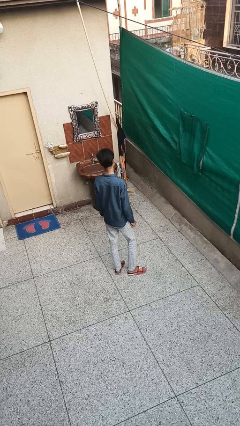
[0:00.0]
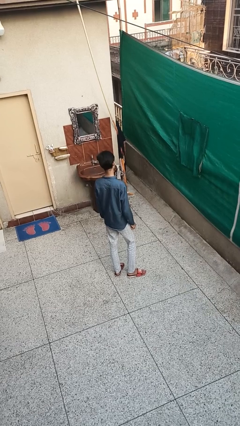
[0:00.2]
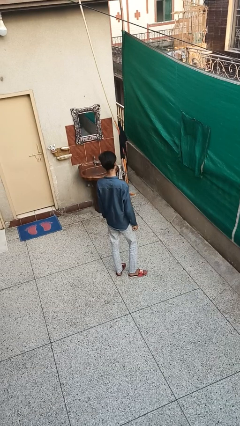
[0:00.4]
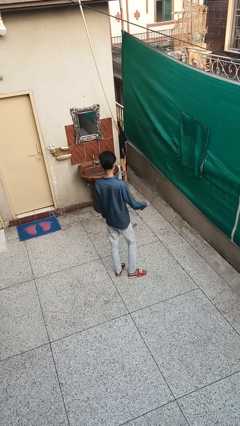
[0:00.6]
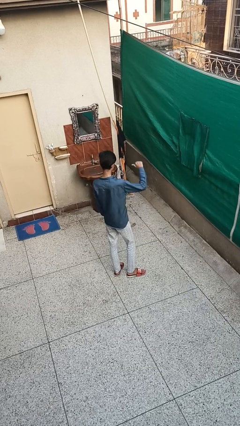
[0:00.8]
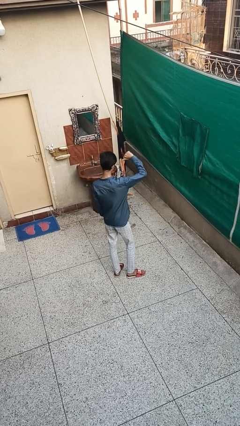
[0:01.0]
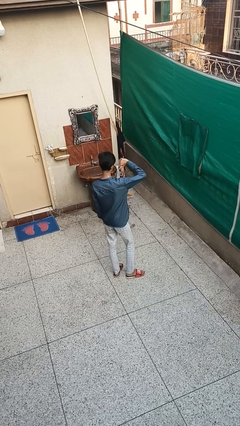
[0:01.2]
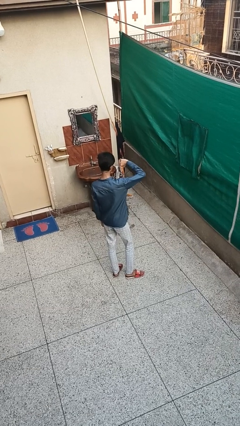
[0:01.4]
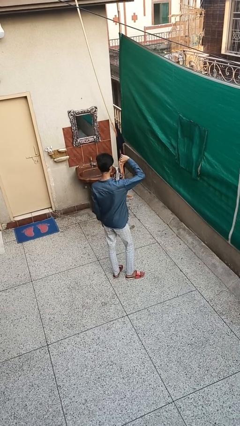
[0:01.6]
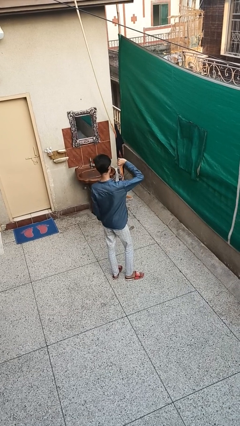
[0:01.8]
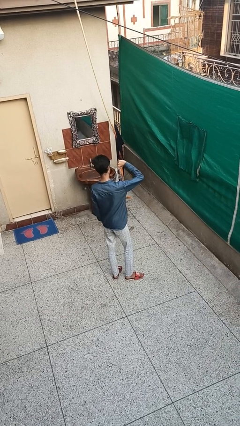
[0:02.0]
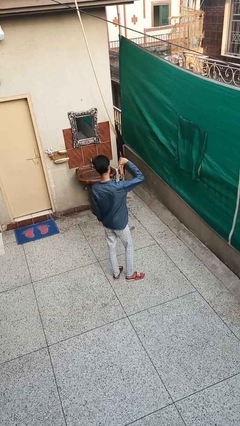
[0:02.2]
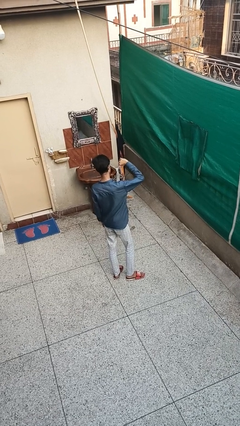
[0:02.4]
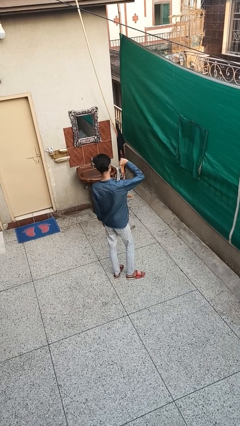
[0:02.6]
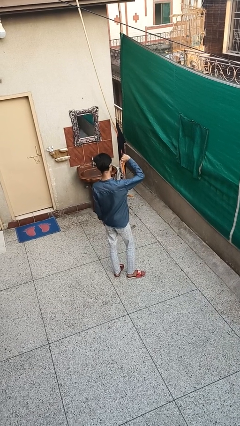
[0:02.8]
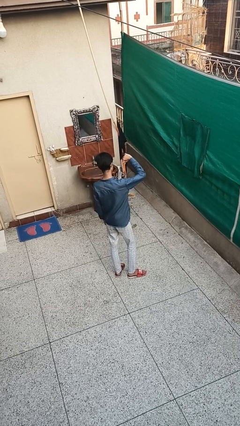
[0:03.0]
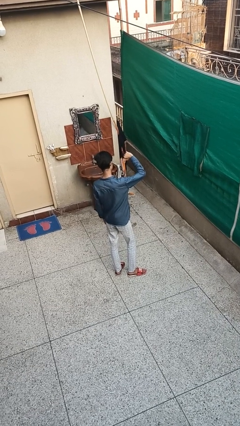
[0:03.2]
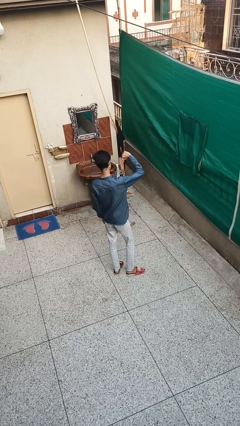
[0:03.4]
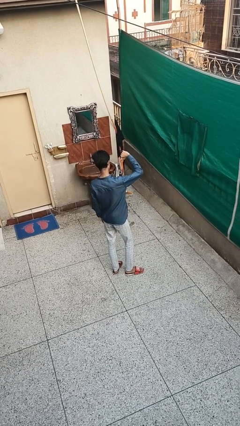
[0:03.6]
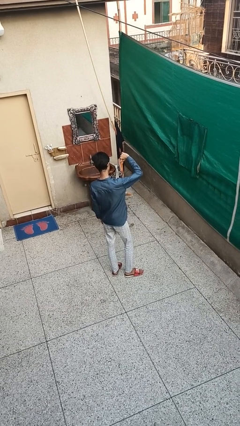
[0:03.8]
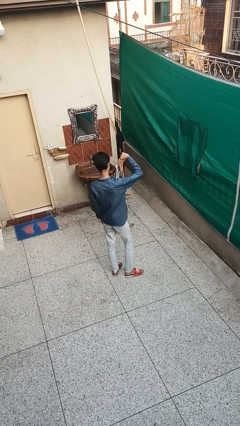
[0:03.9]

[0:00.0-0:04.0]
person gestures thumbs down

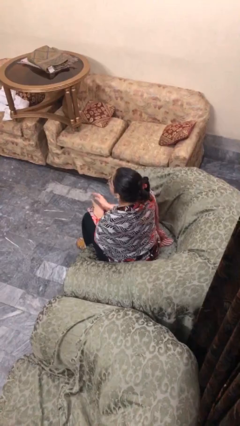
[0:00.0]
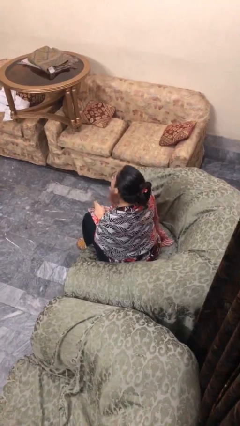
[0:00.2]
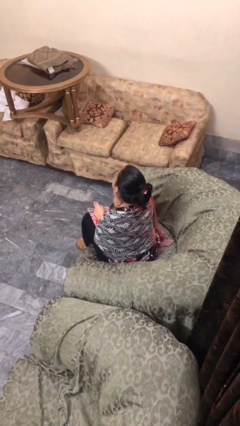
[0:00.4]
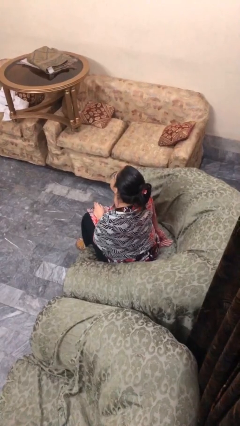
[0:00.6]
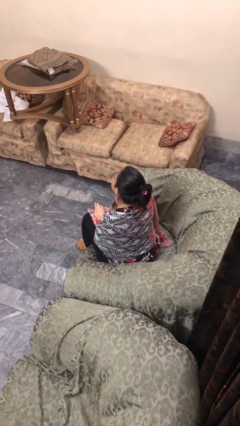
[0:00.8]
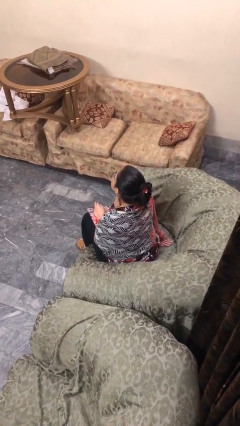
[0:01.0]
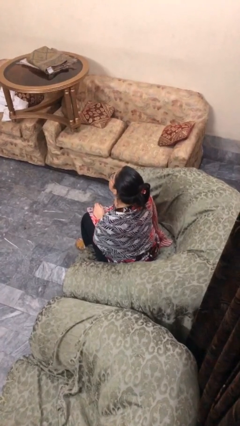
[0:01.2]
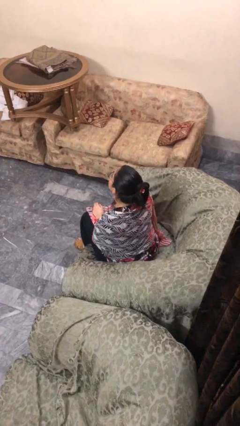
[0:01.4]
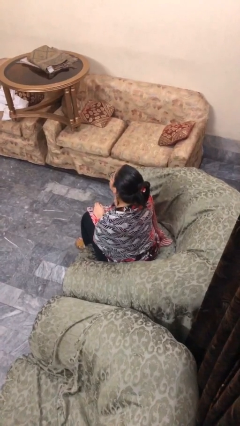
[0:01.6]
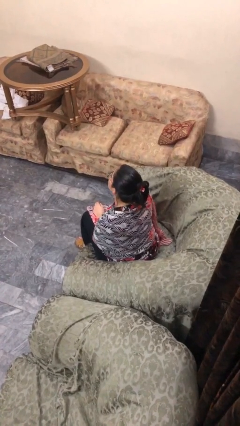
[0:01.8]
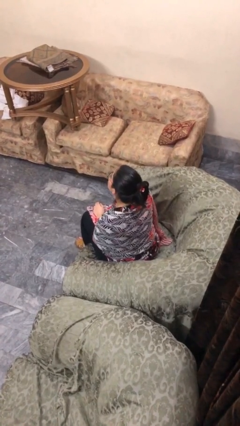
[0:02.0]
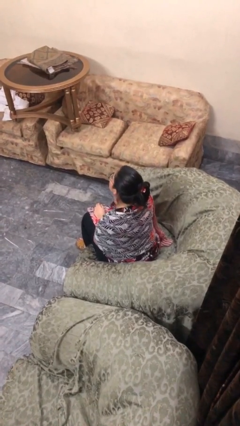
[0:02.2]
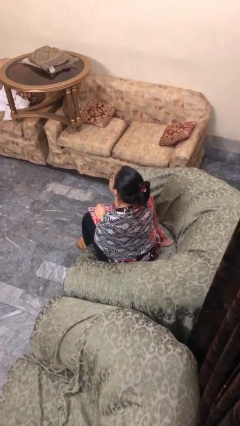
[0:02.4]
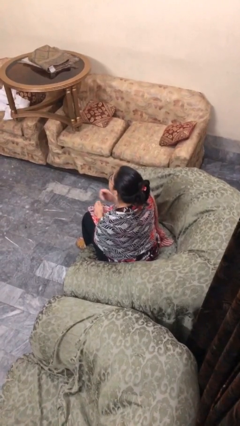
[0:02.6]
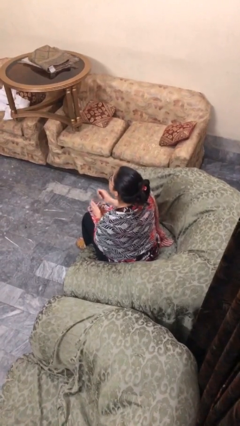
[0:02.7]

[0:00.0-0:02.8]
person rubs neck

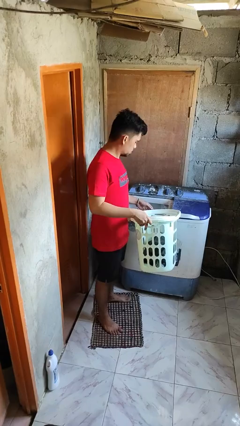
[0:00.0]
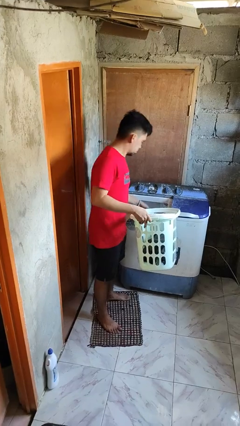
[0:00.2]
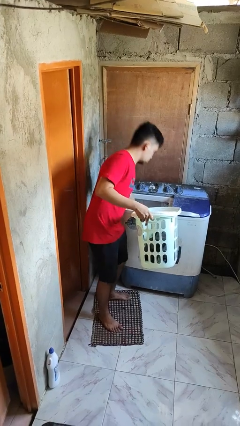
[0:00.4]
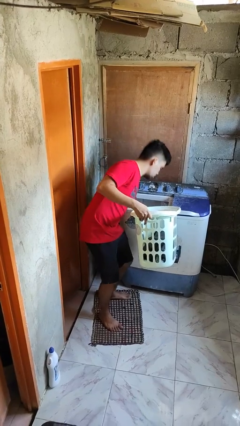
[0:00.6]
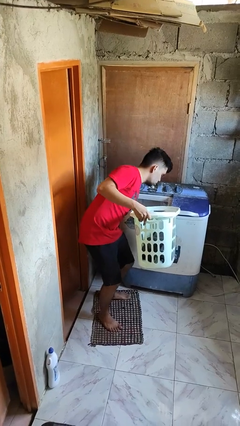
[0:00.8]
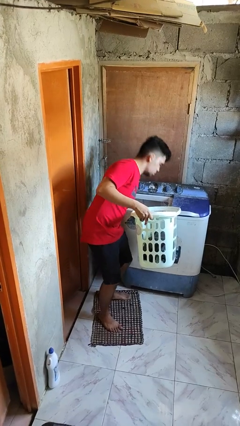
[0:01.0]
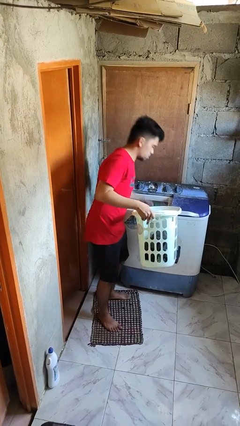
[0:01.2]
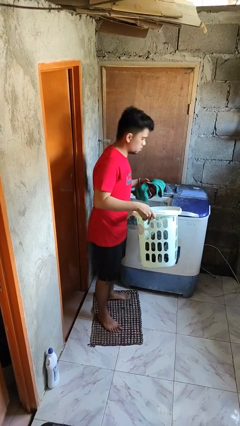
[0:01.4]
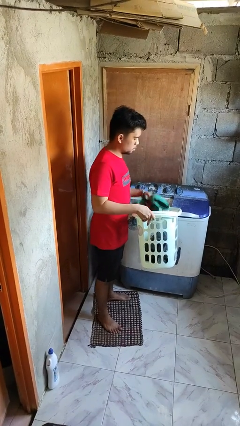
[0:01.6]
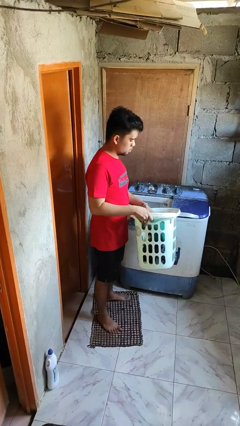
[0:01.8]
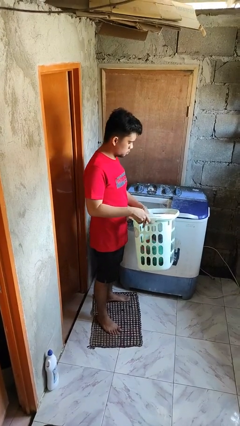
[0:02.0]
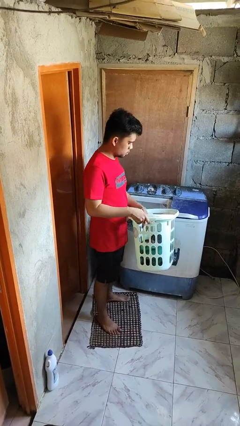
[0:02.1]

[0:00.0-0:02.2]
person loads clotheswasher

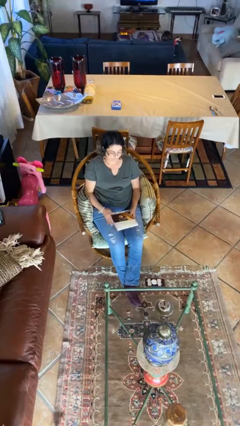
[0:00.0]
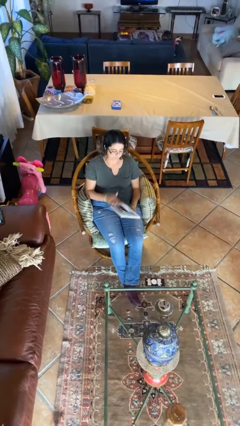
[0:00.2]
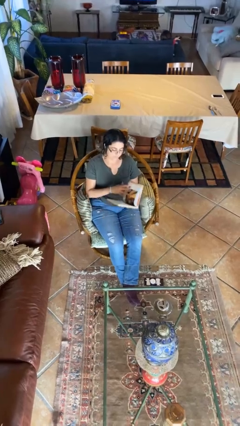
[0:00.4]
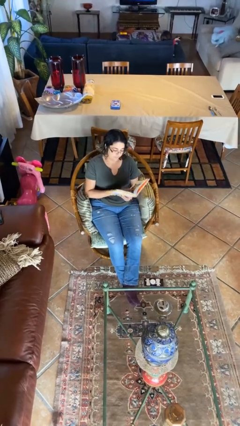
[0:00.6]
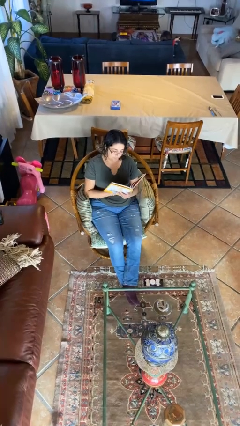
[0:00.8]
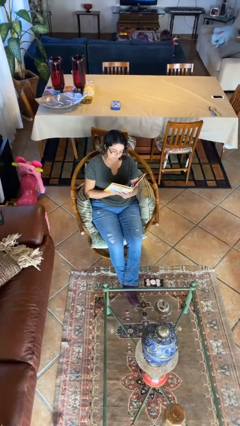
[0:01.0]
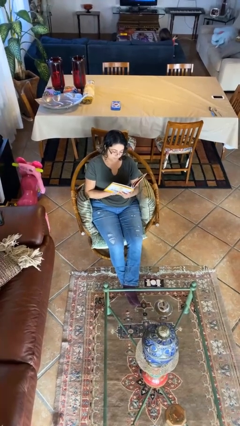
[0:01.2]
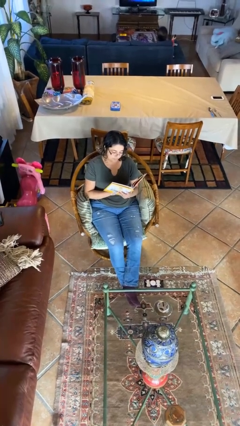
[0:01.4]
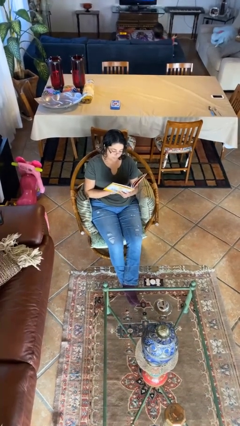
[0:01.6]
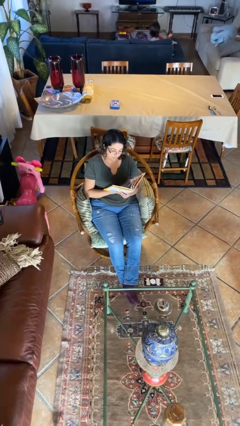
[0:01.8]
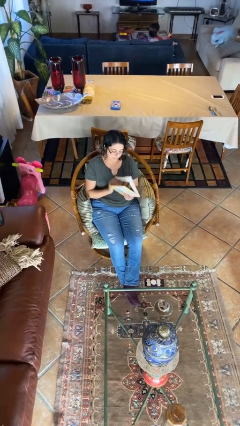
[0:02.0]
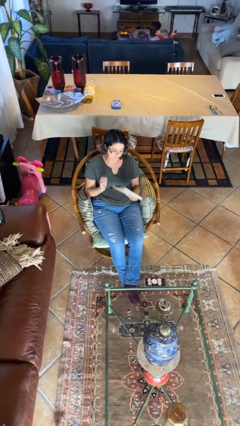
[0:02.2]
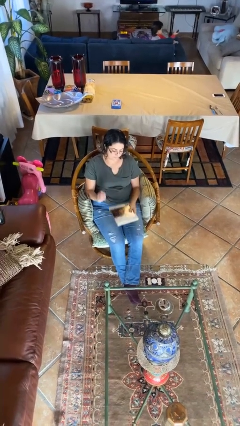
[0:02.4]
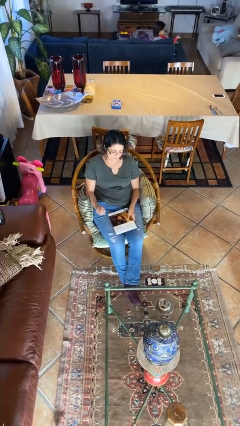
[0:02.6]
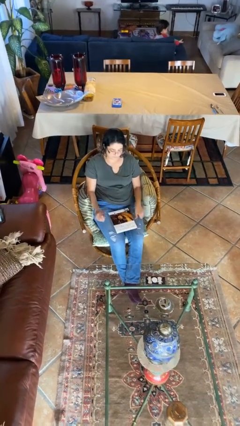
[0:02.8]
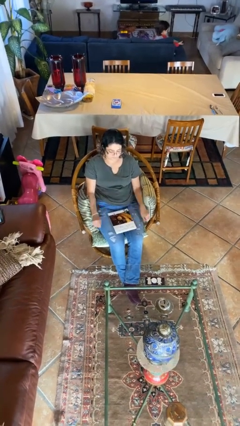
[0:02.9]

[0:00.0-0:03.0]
person reads document

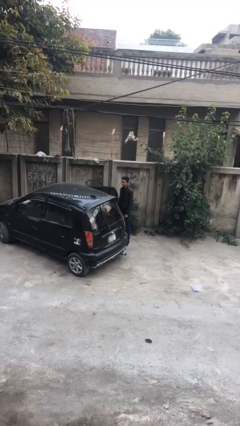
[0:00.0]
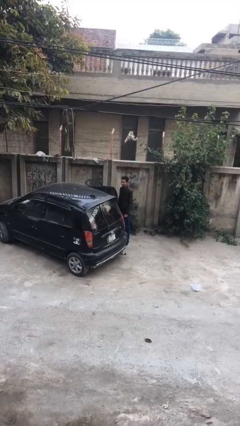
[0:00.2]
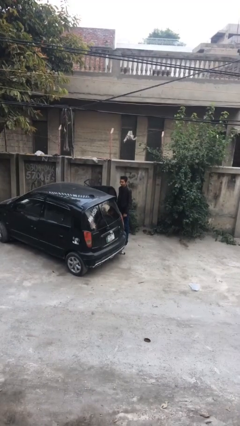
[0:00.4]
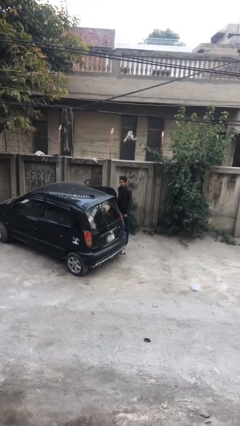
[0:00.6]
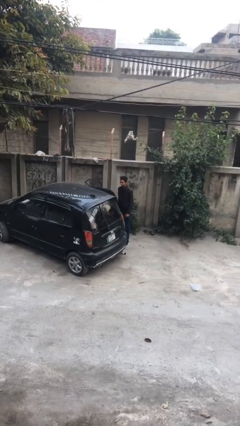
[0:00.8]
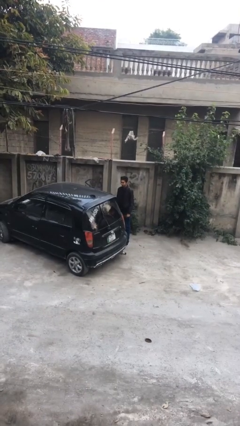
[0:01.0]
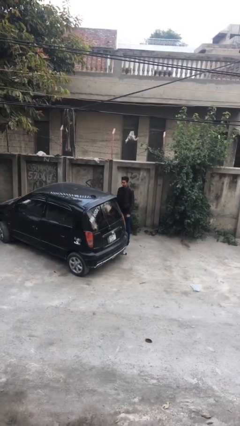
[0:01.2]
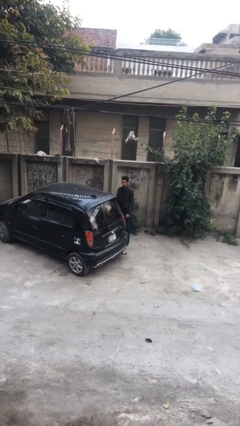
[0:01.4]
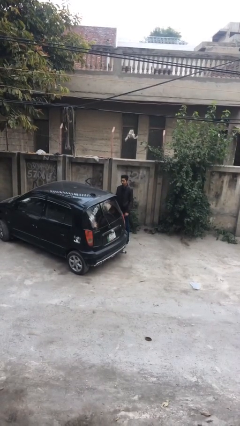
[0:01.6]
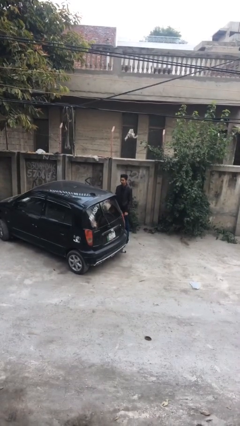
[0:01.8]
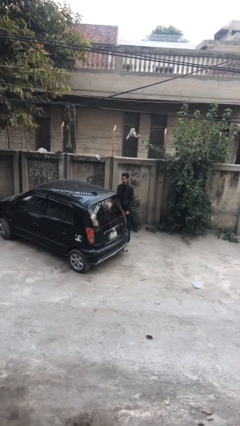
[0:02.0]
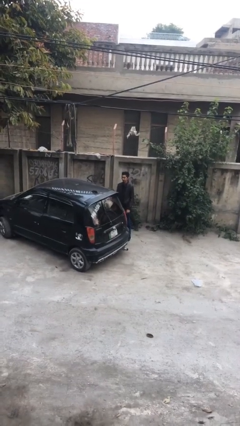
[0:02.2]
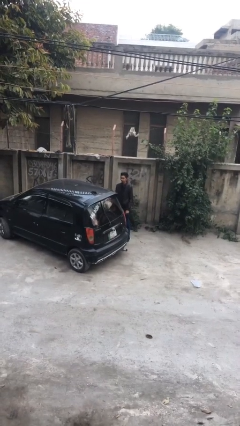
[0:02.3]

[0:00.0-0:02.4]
person closes car door

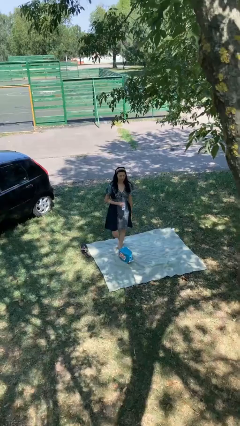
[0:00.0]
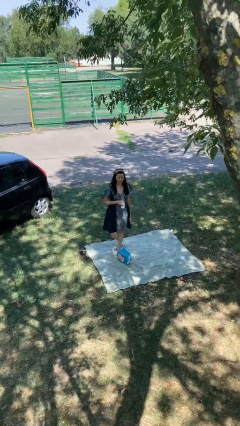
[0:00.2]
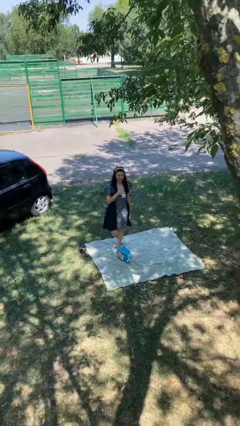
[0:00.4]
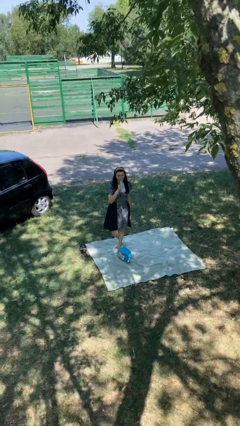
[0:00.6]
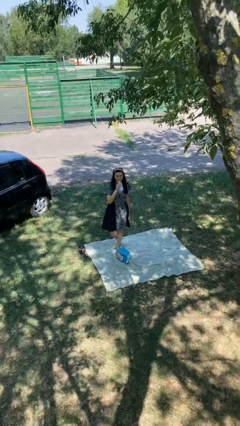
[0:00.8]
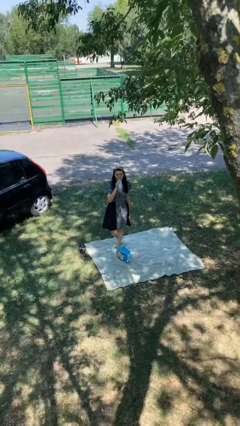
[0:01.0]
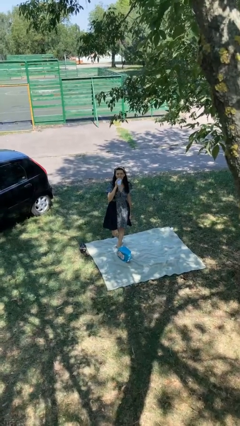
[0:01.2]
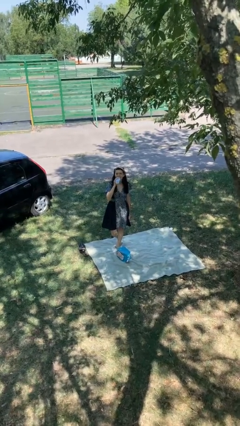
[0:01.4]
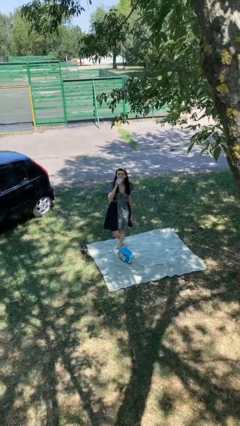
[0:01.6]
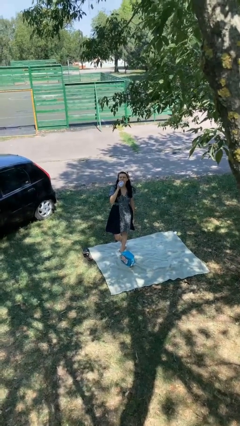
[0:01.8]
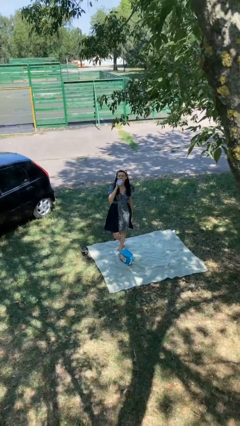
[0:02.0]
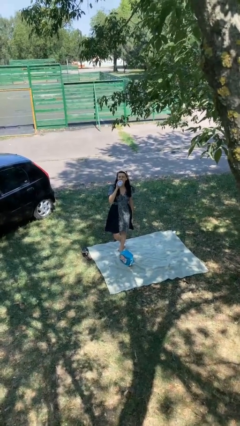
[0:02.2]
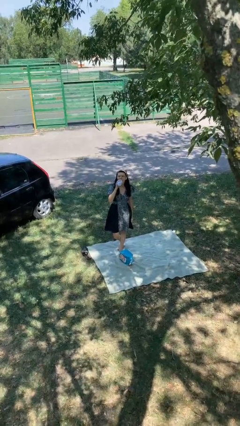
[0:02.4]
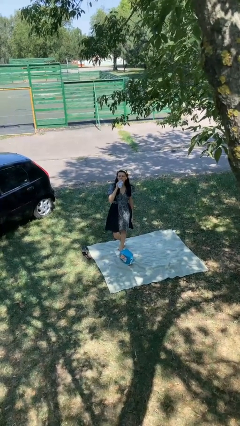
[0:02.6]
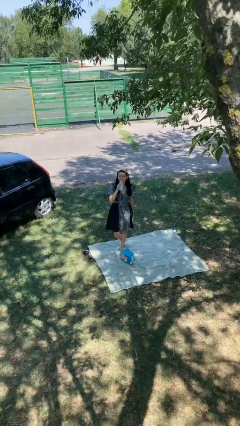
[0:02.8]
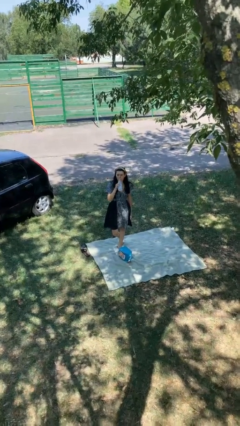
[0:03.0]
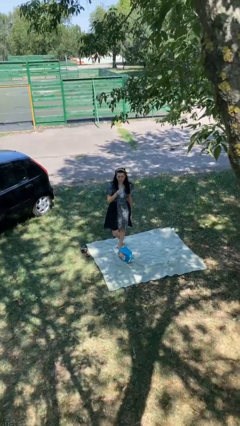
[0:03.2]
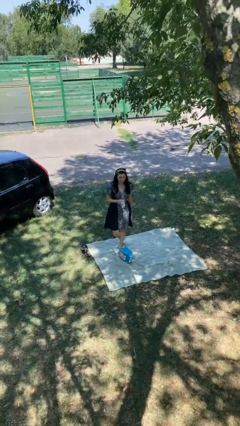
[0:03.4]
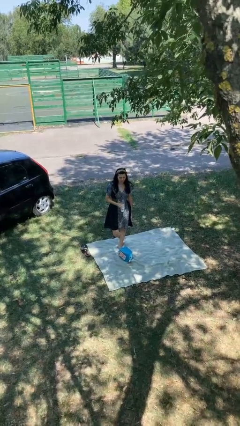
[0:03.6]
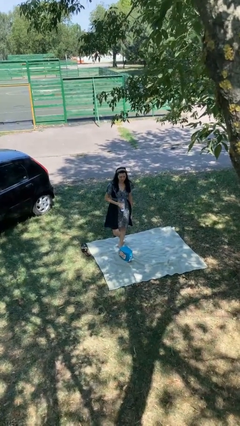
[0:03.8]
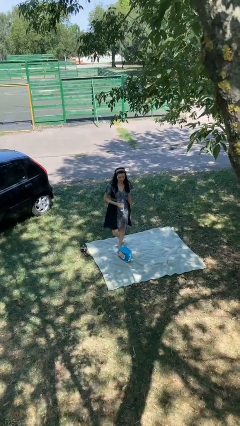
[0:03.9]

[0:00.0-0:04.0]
person drinks from bottle
